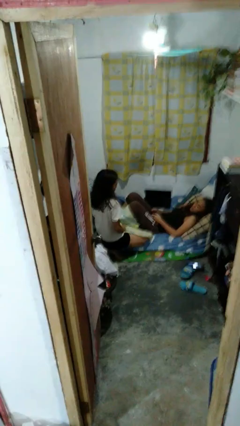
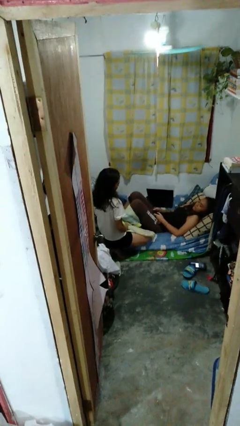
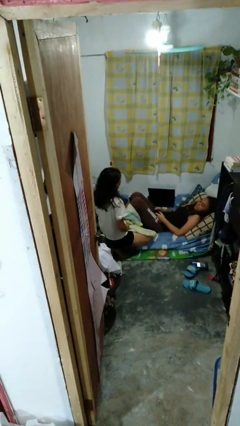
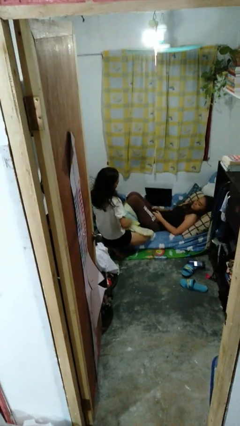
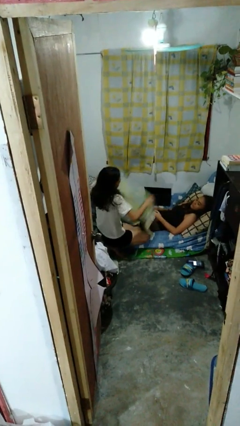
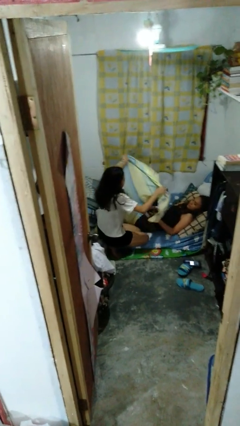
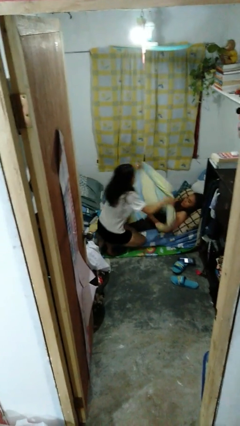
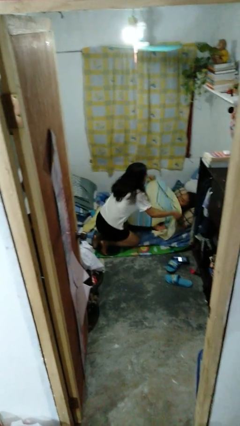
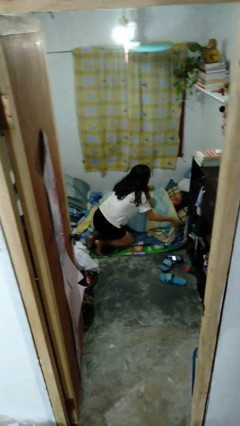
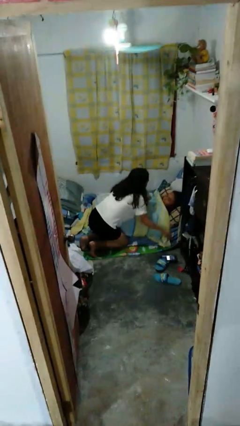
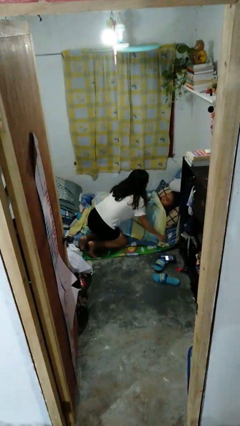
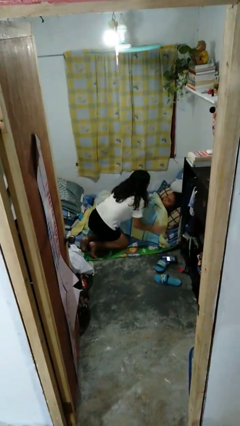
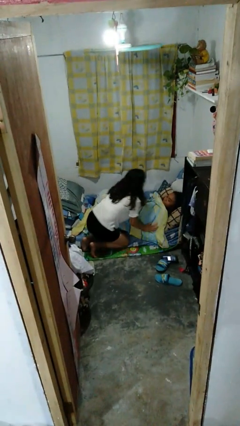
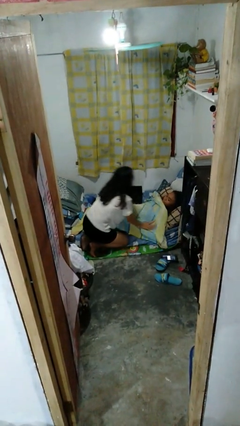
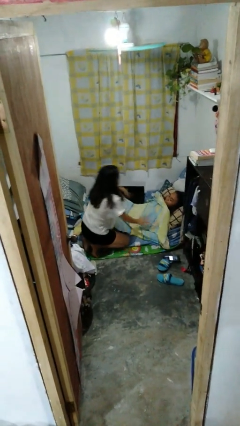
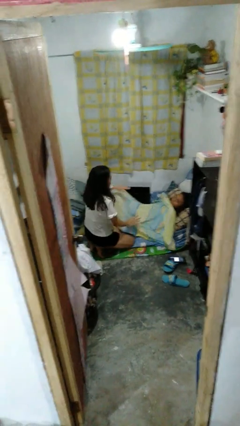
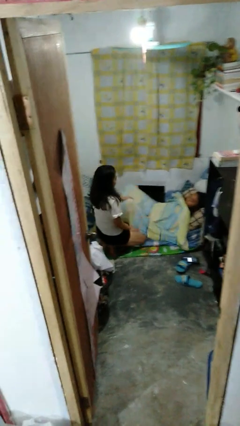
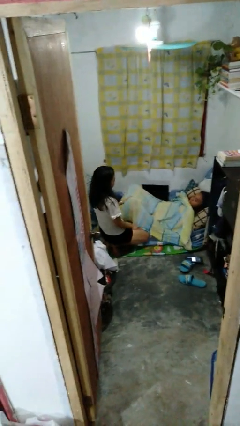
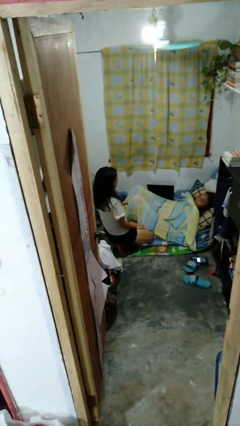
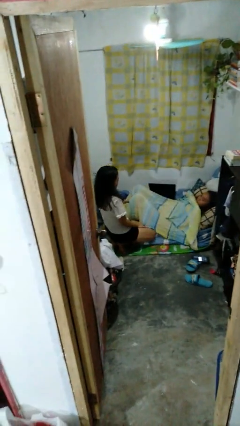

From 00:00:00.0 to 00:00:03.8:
person covers friend with blanket

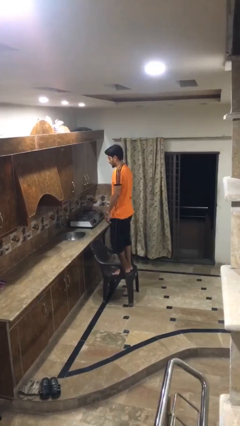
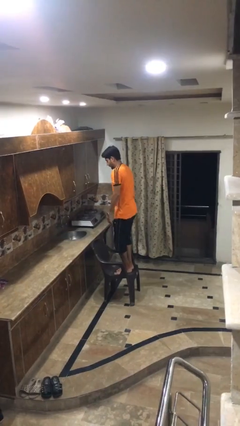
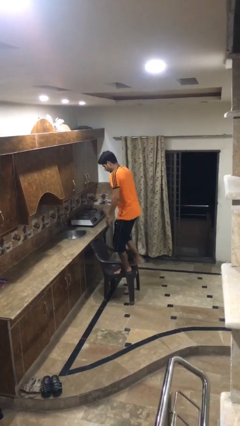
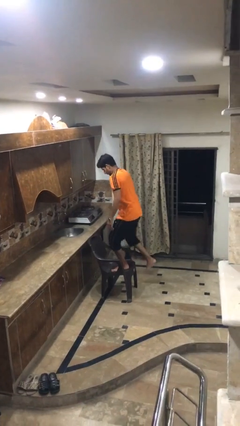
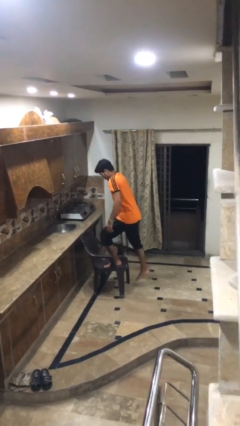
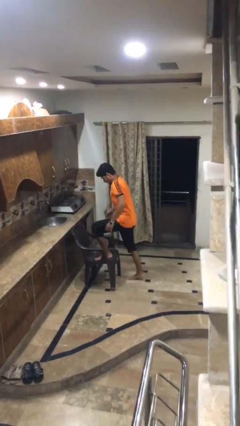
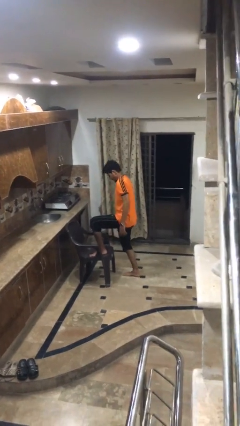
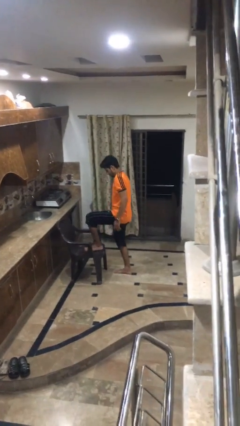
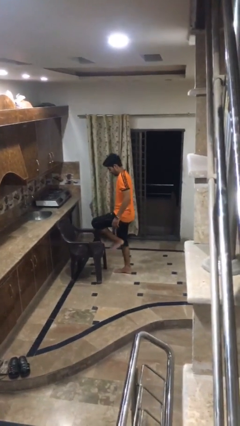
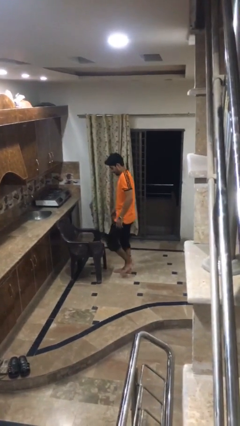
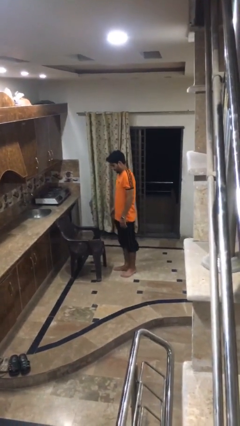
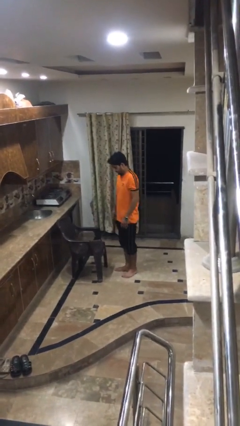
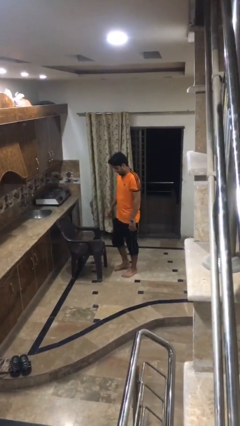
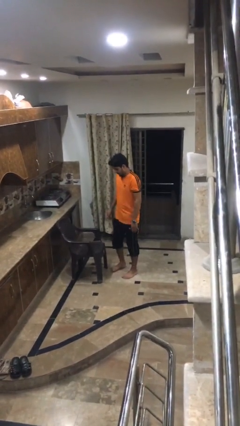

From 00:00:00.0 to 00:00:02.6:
person climbs off chair

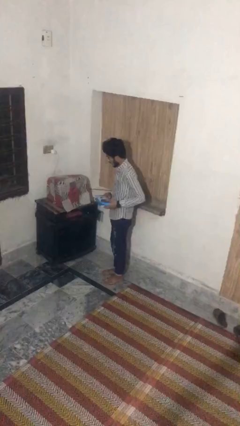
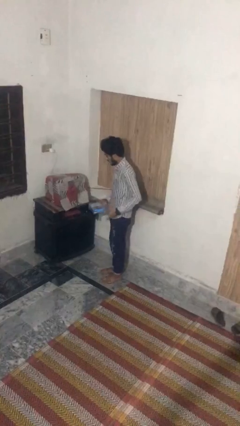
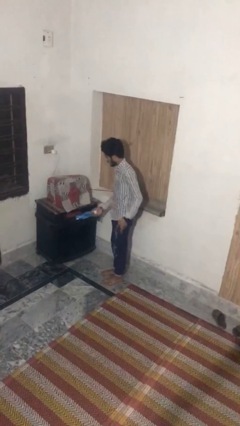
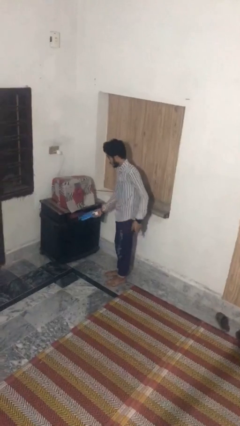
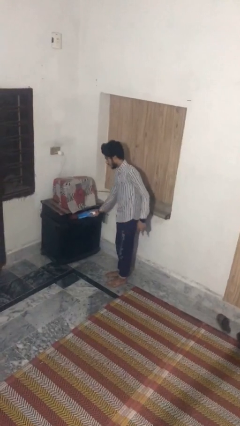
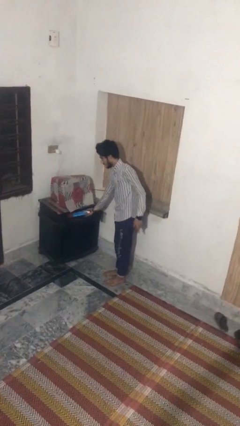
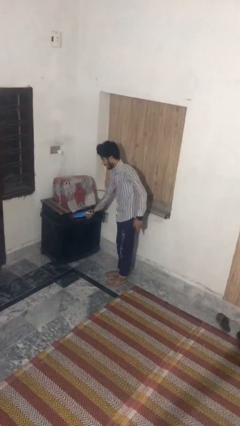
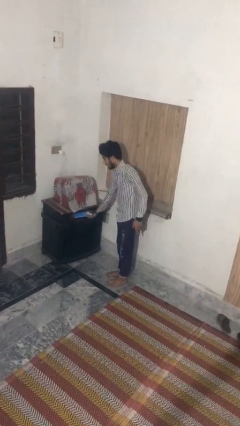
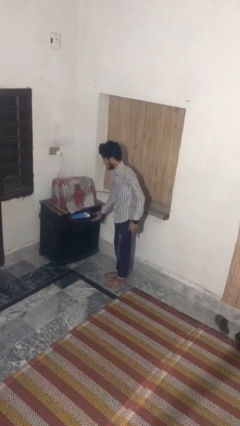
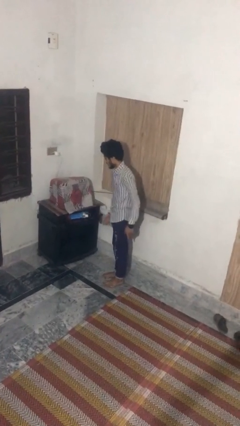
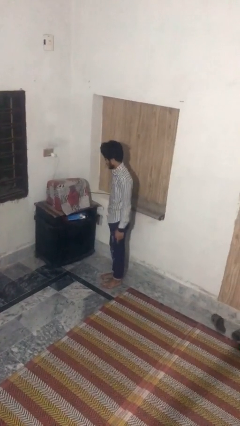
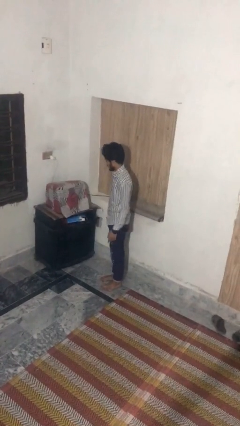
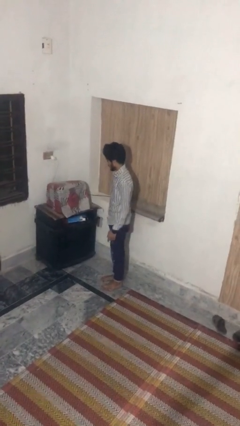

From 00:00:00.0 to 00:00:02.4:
person puts down object into cabinet

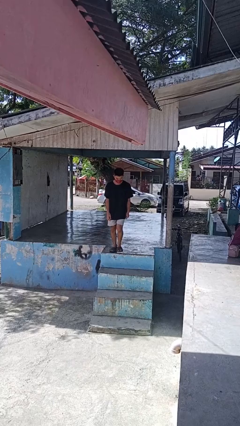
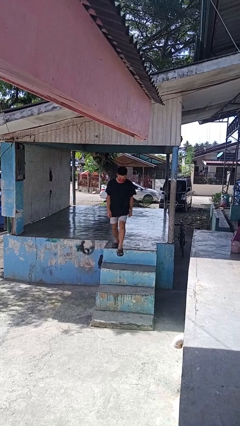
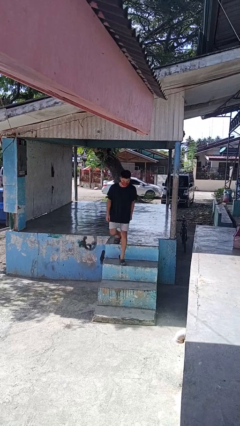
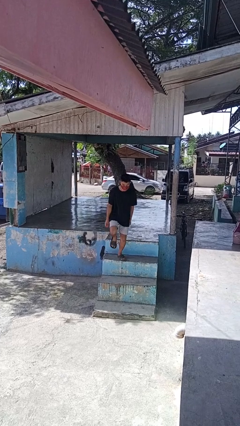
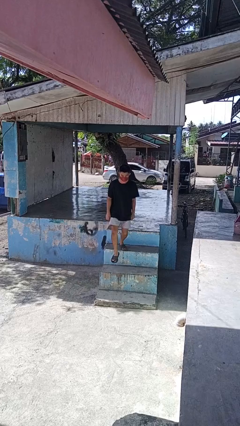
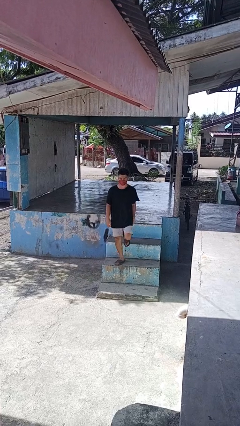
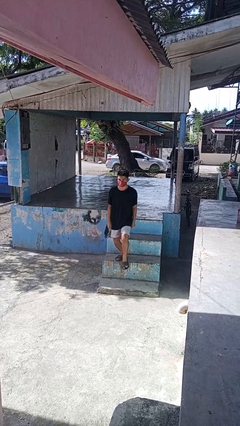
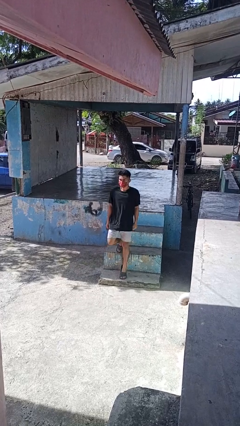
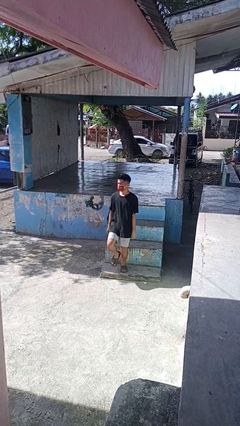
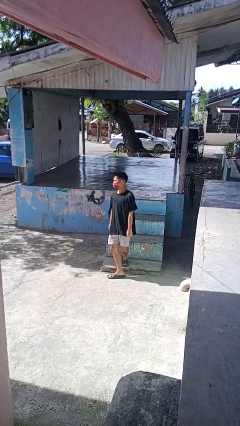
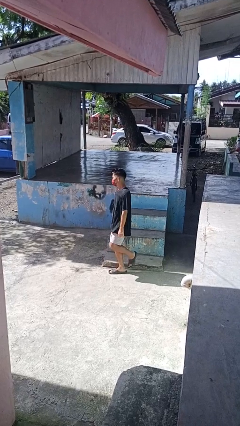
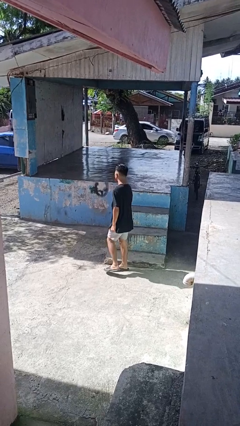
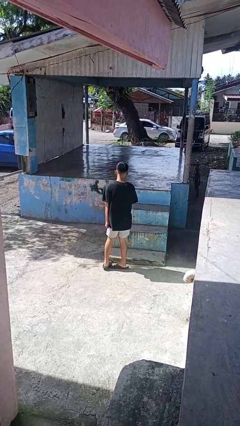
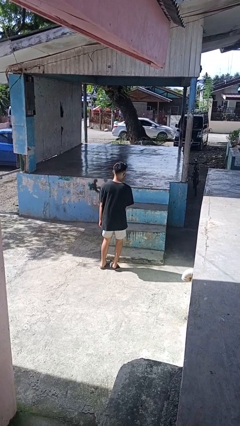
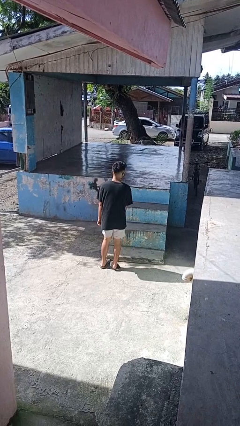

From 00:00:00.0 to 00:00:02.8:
person climbs down stairs

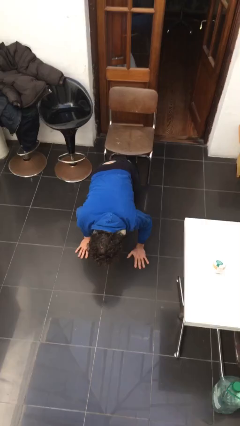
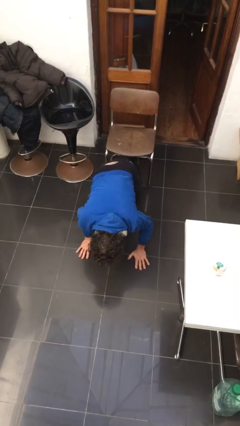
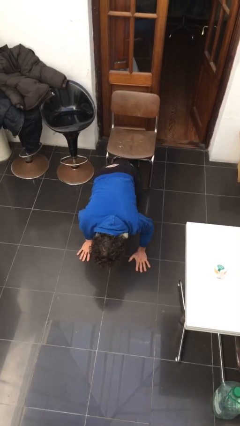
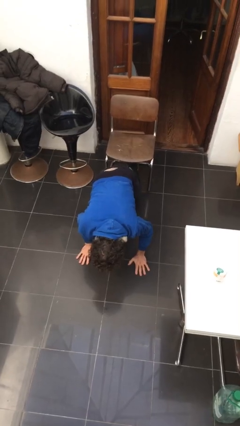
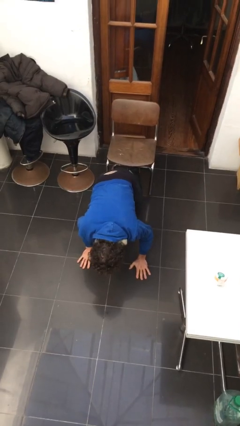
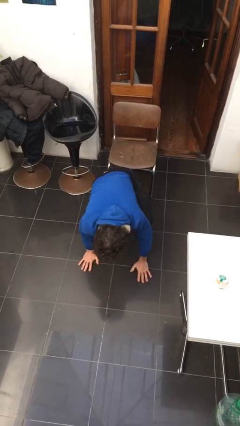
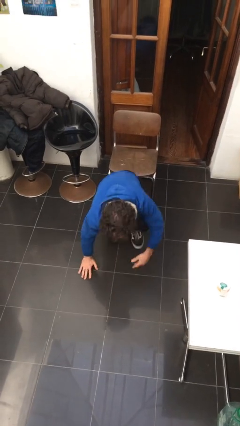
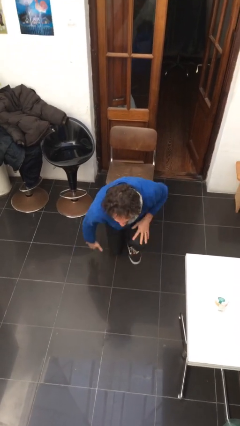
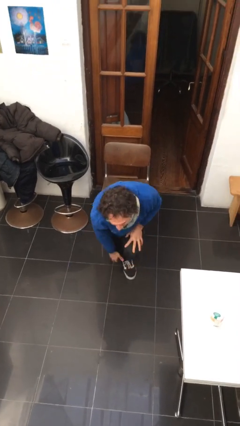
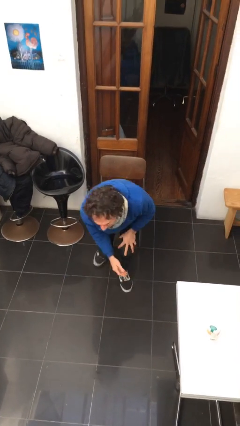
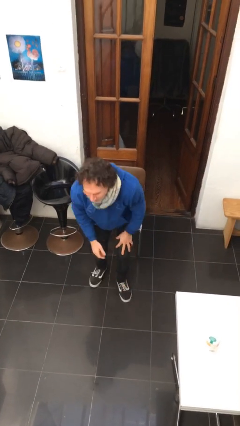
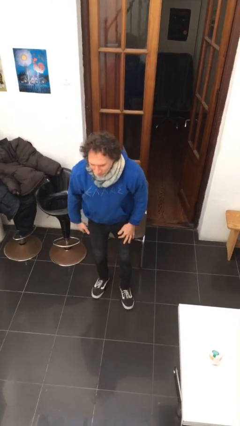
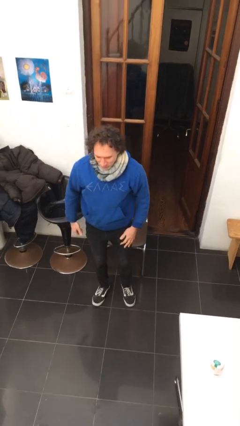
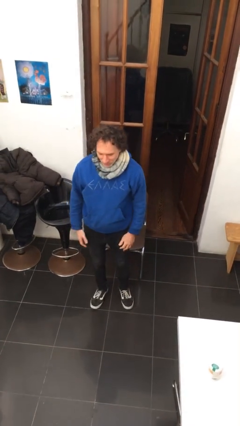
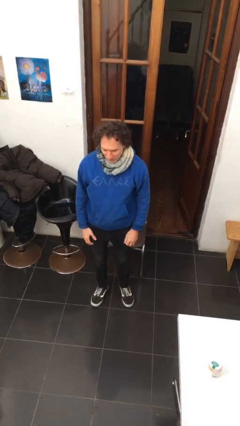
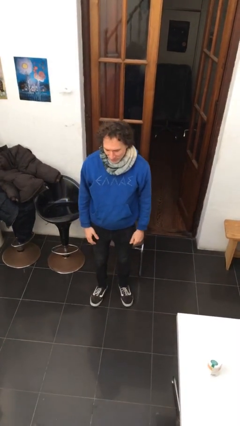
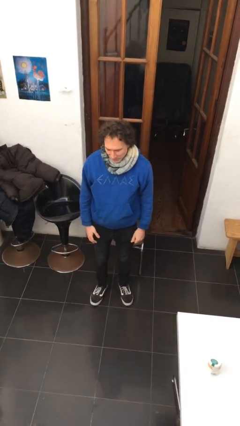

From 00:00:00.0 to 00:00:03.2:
person stands up from floor

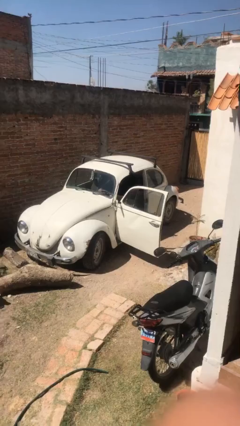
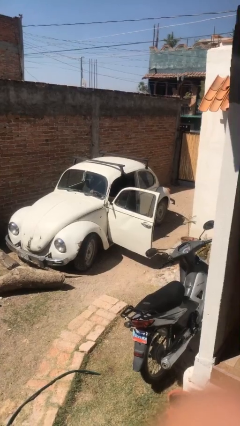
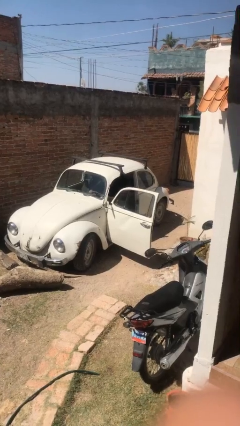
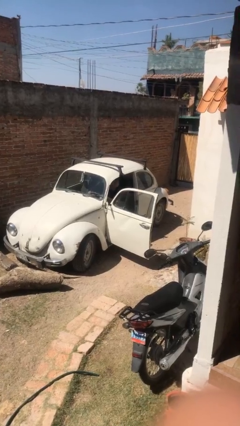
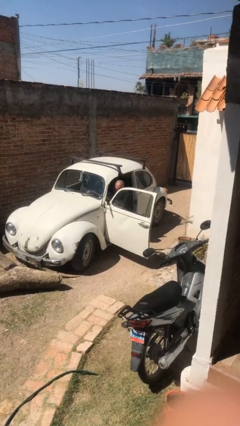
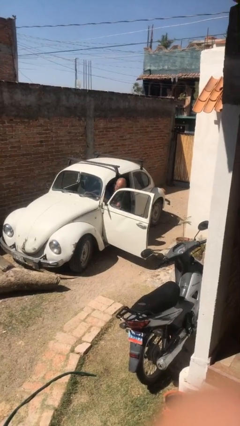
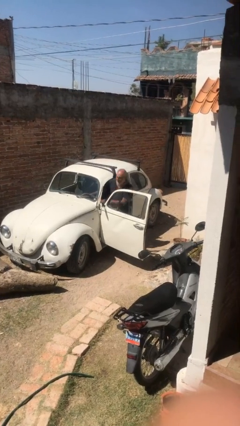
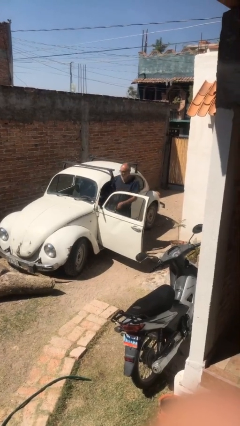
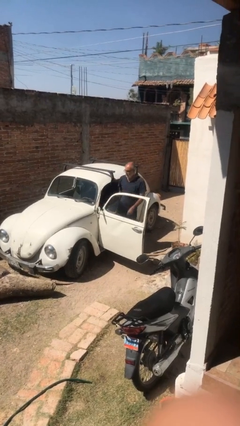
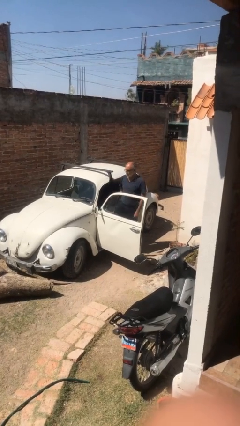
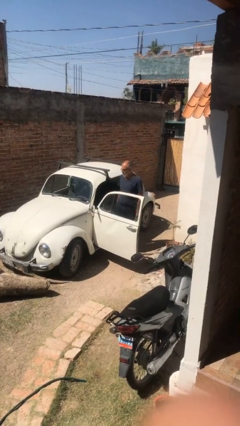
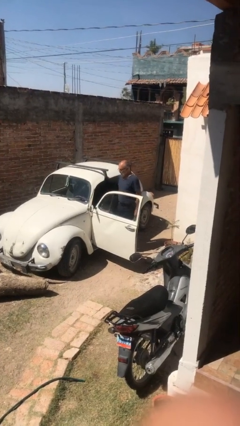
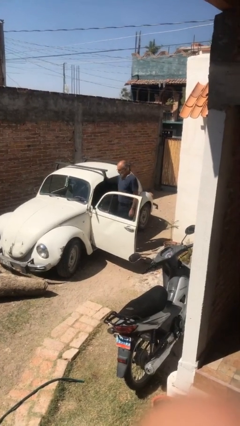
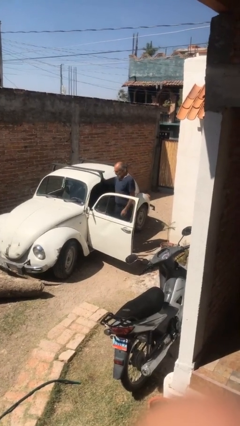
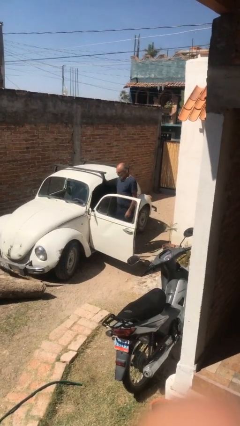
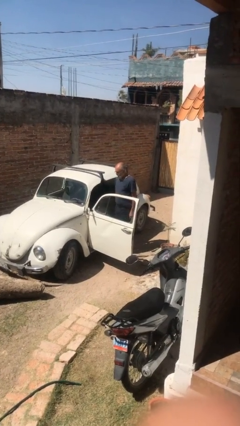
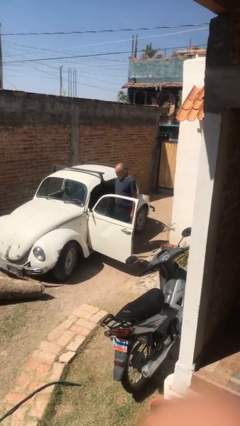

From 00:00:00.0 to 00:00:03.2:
person exits car
